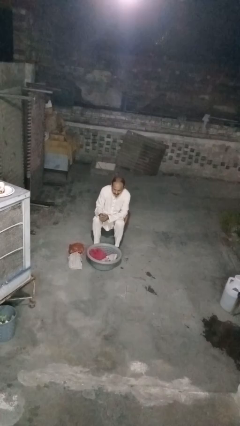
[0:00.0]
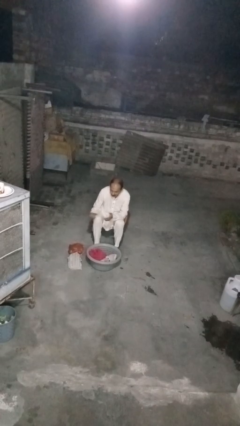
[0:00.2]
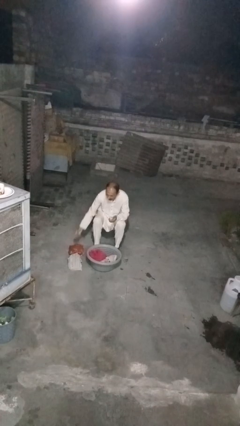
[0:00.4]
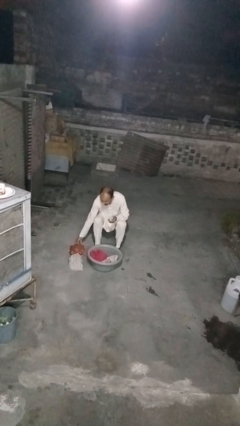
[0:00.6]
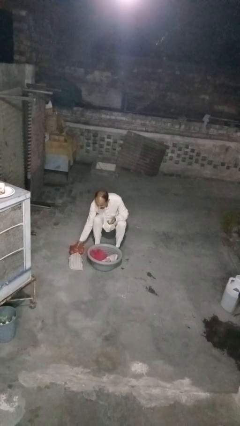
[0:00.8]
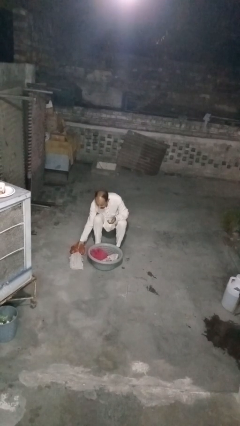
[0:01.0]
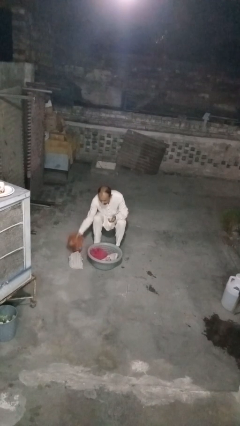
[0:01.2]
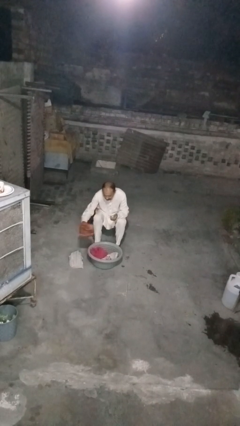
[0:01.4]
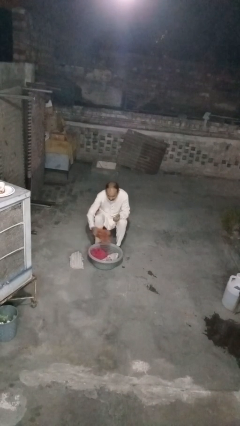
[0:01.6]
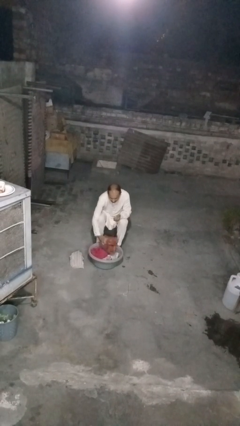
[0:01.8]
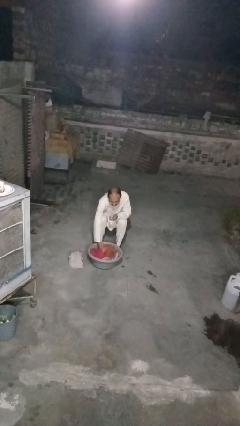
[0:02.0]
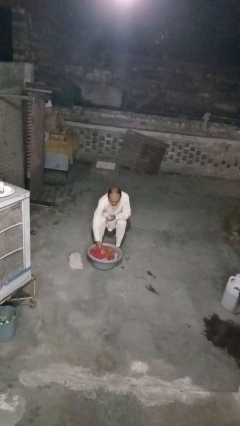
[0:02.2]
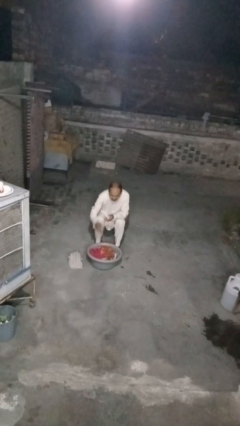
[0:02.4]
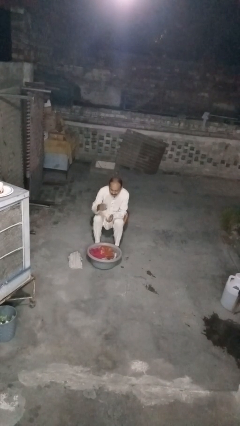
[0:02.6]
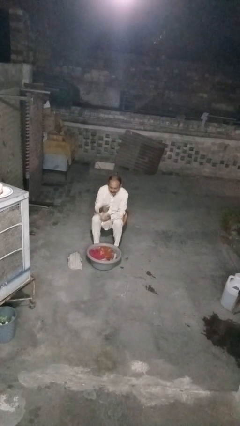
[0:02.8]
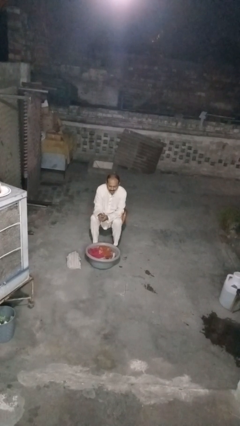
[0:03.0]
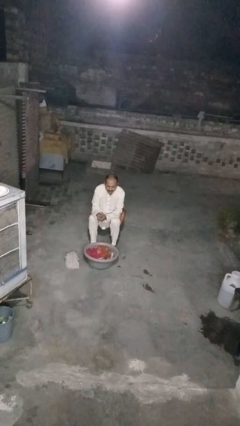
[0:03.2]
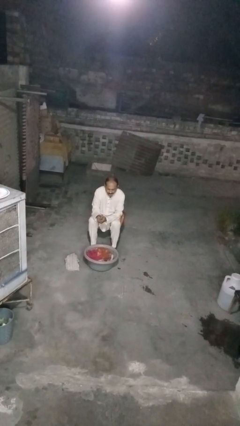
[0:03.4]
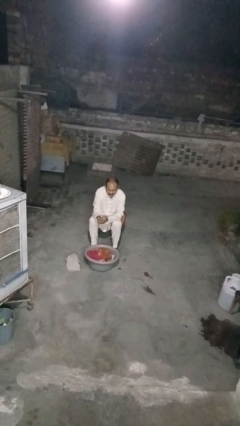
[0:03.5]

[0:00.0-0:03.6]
person puts object into basket

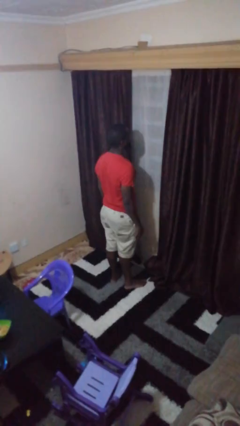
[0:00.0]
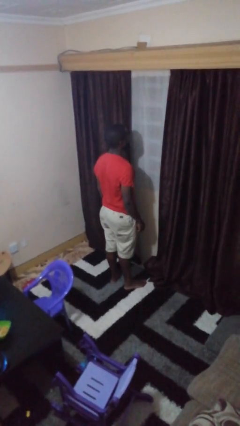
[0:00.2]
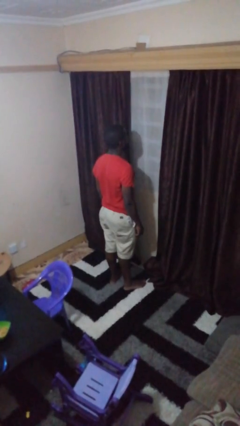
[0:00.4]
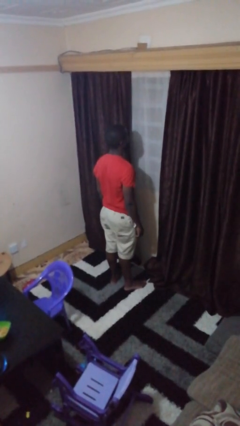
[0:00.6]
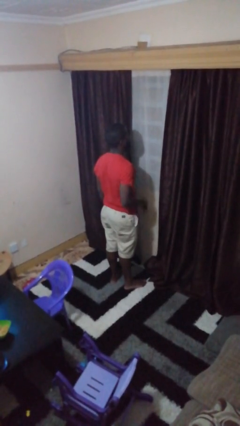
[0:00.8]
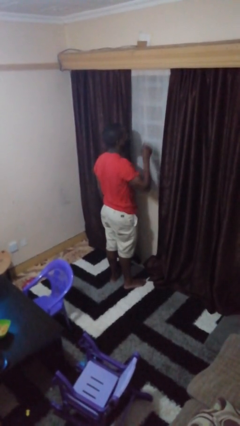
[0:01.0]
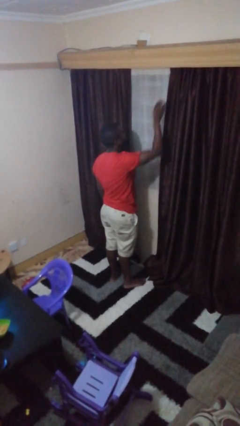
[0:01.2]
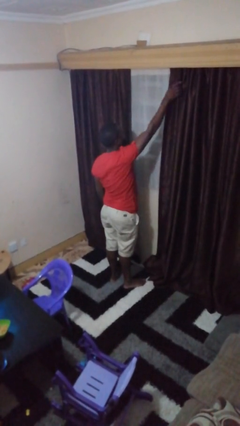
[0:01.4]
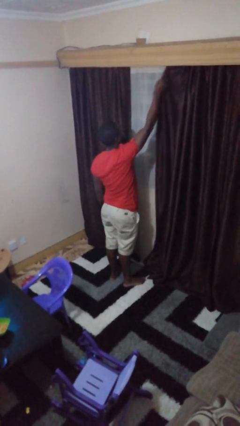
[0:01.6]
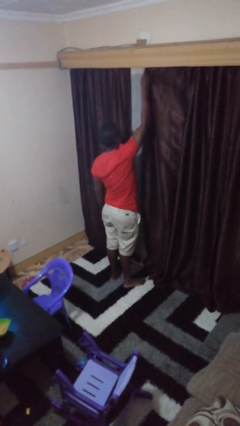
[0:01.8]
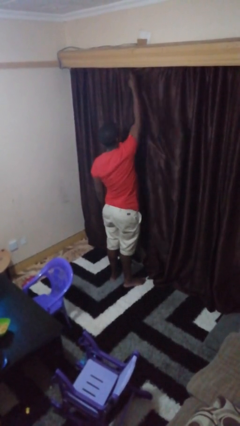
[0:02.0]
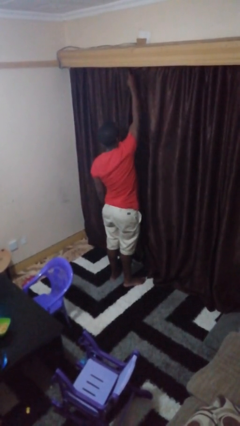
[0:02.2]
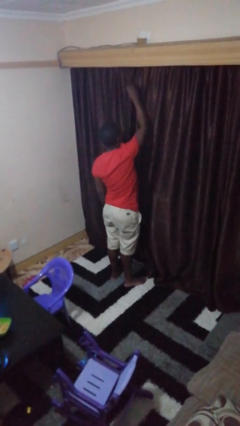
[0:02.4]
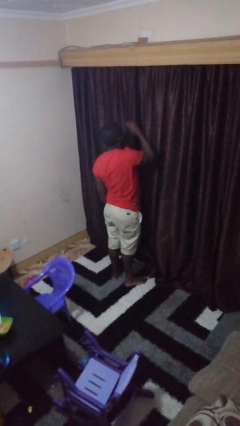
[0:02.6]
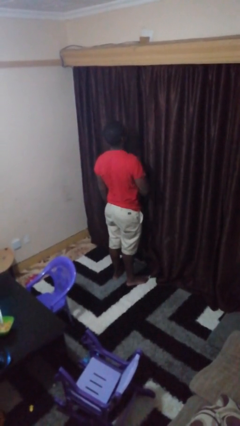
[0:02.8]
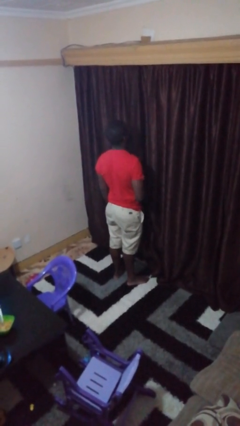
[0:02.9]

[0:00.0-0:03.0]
person closes curtains

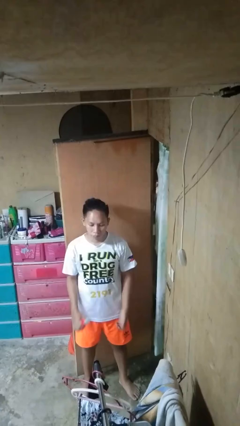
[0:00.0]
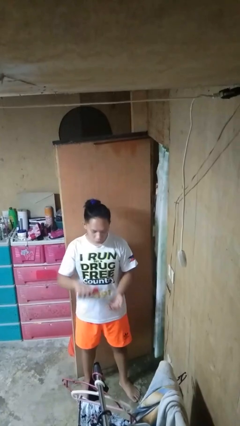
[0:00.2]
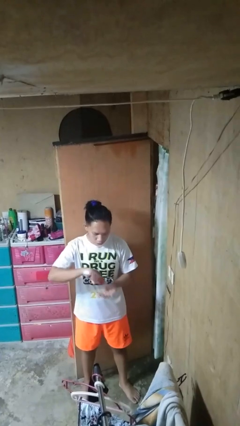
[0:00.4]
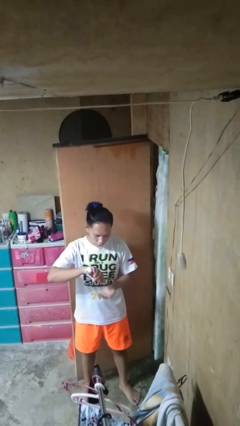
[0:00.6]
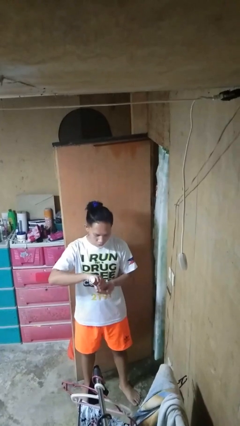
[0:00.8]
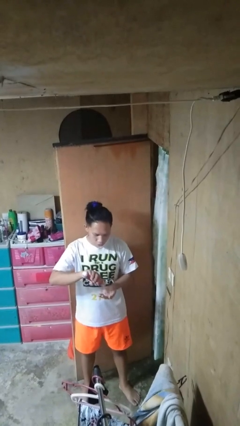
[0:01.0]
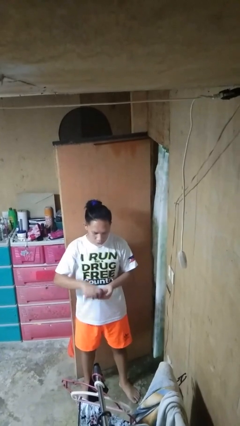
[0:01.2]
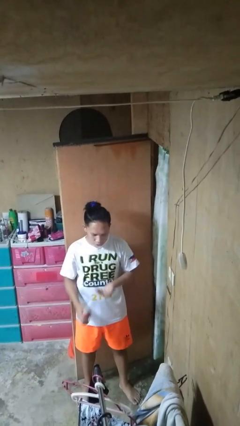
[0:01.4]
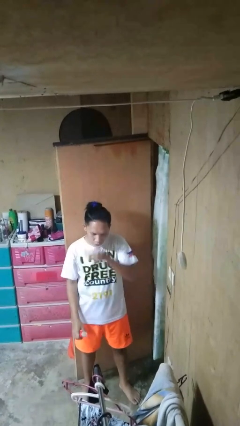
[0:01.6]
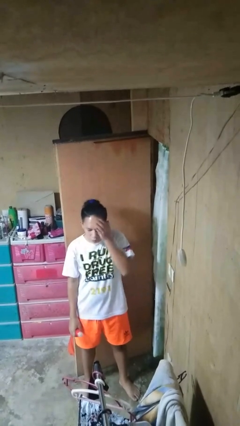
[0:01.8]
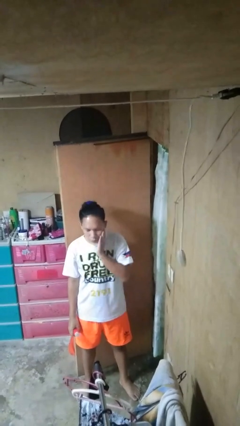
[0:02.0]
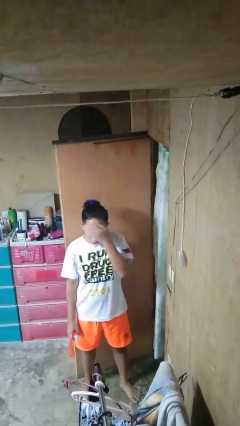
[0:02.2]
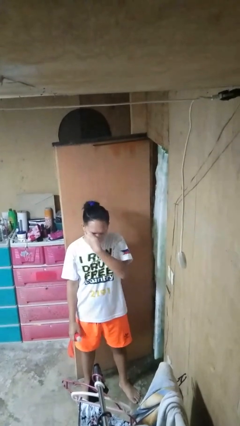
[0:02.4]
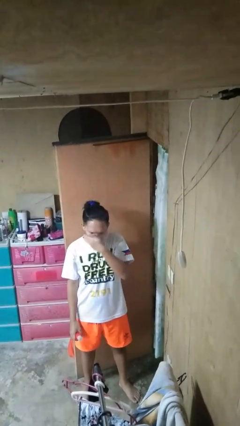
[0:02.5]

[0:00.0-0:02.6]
person applies facial moisturizer

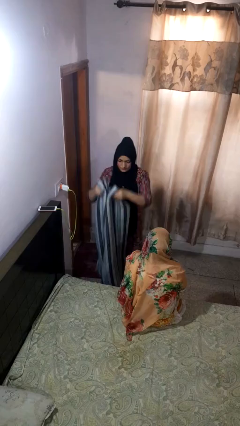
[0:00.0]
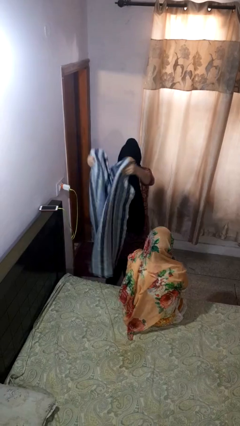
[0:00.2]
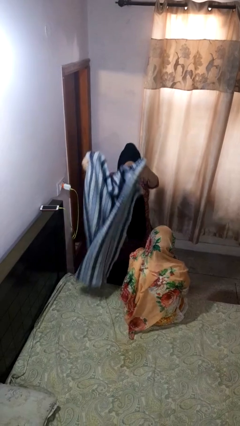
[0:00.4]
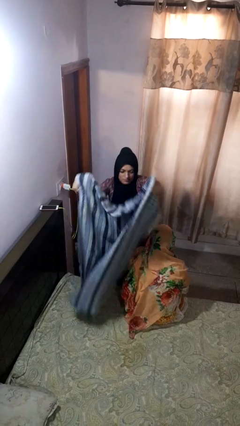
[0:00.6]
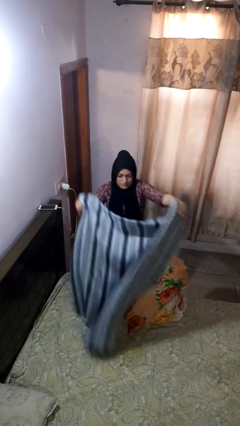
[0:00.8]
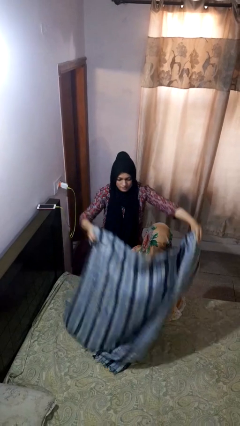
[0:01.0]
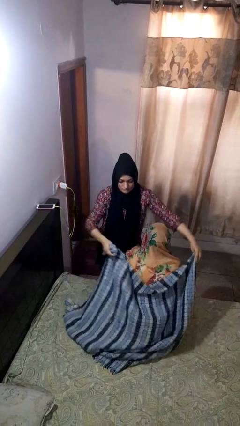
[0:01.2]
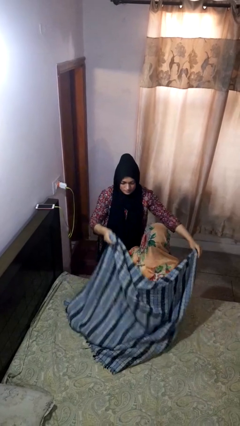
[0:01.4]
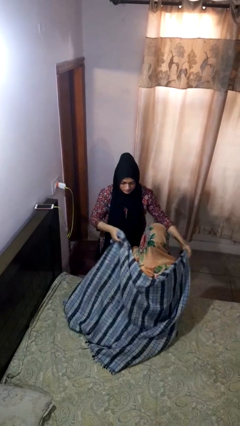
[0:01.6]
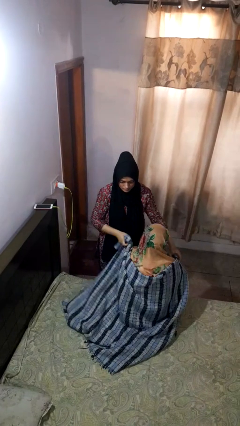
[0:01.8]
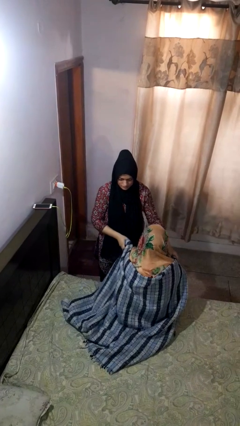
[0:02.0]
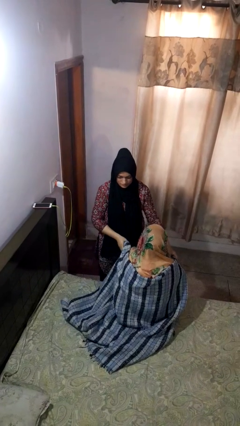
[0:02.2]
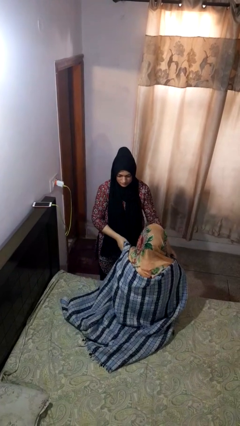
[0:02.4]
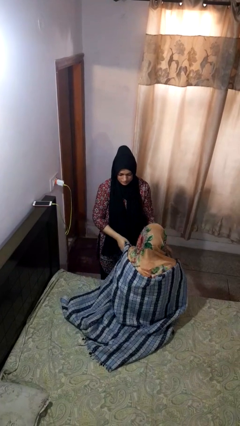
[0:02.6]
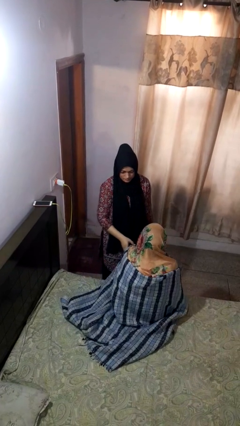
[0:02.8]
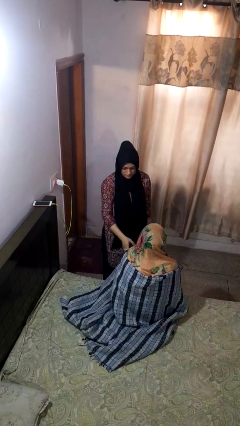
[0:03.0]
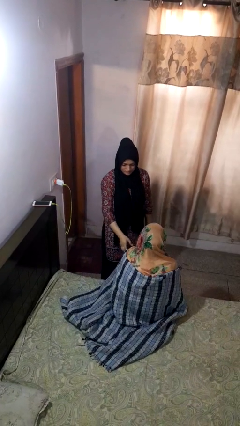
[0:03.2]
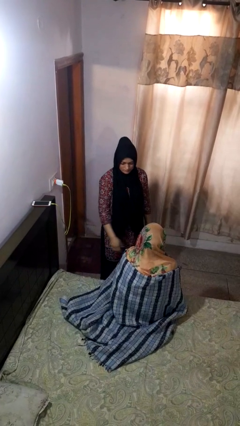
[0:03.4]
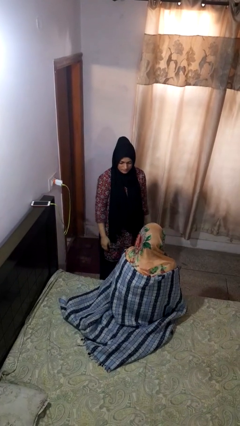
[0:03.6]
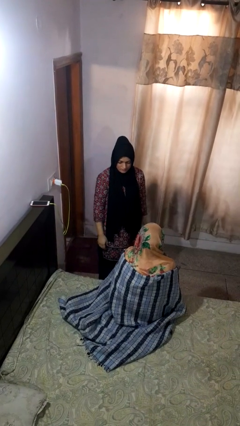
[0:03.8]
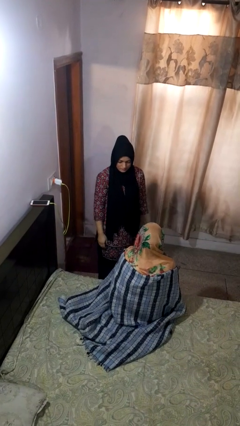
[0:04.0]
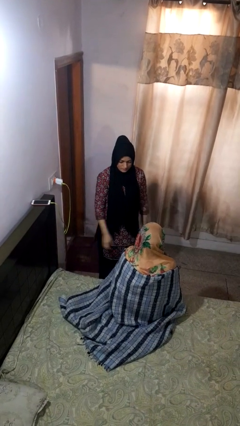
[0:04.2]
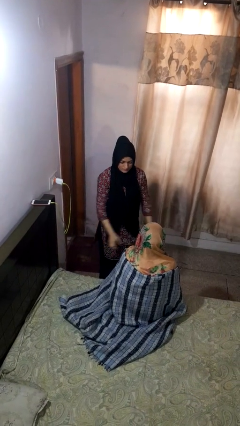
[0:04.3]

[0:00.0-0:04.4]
person covers friend with blanket

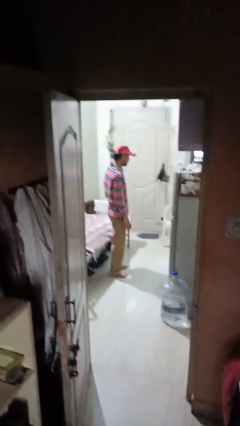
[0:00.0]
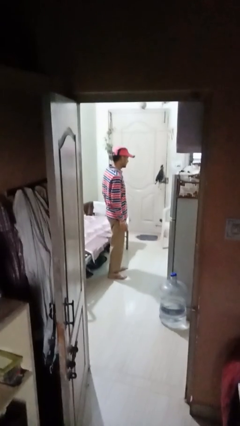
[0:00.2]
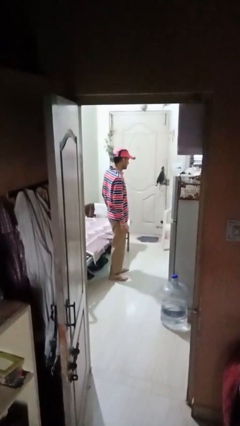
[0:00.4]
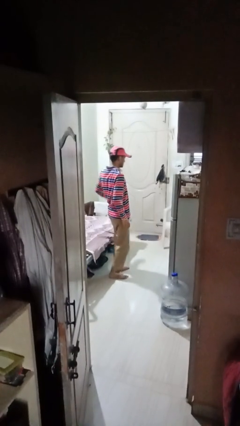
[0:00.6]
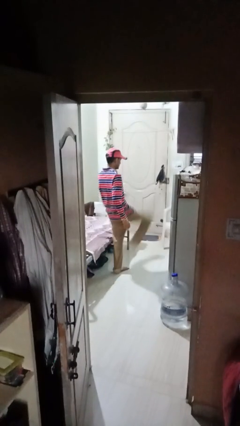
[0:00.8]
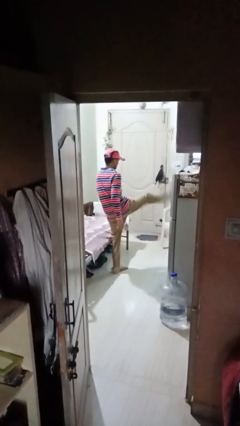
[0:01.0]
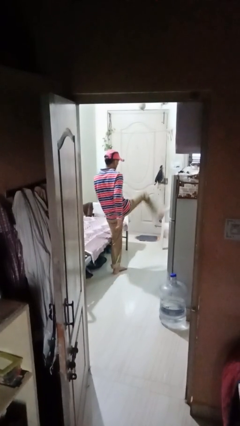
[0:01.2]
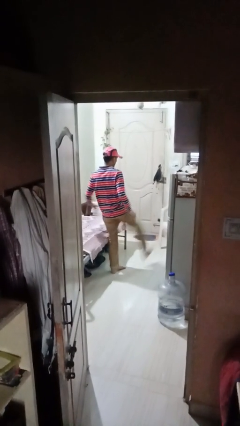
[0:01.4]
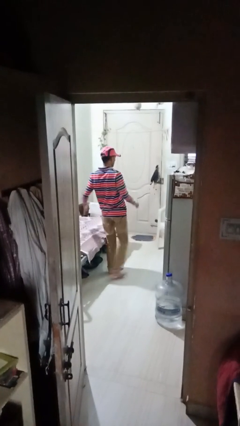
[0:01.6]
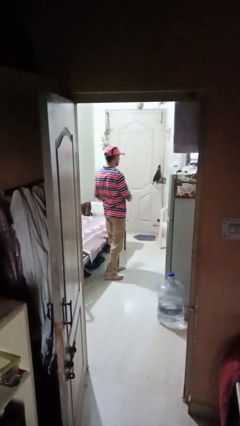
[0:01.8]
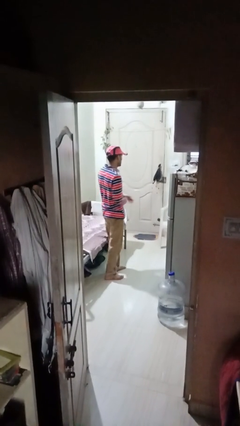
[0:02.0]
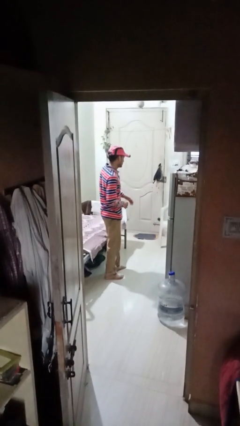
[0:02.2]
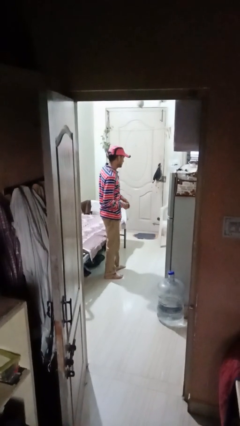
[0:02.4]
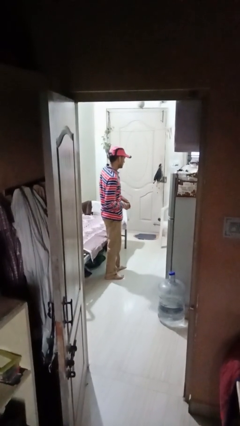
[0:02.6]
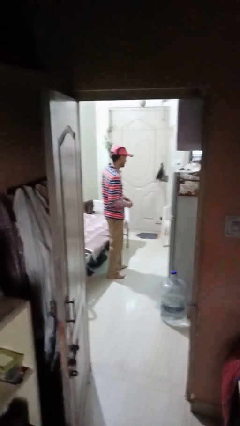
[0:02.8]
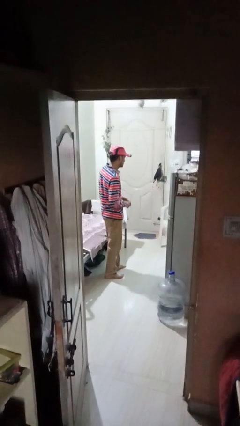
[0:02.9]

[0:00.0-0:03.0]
person karate kicks

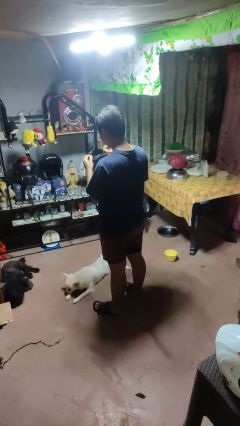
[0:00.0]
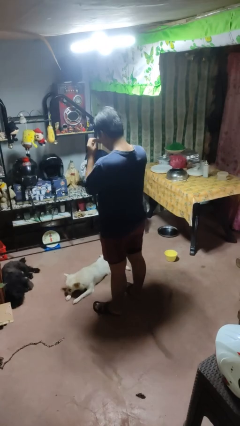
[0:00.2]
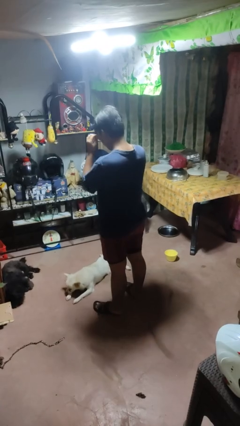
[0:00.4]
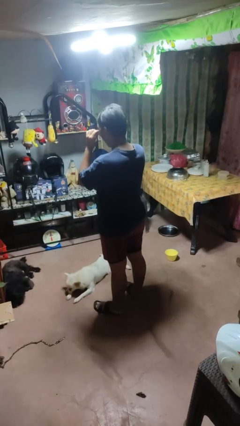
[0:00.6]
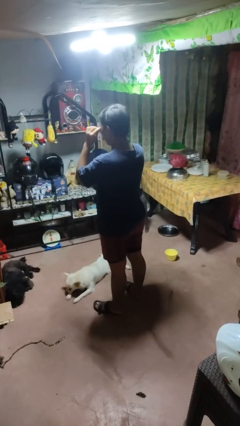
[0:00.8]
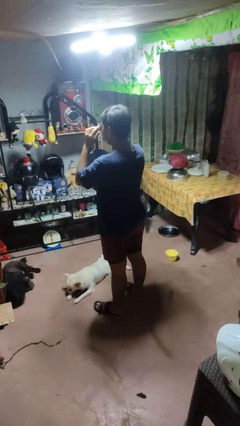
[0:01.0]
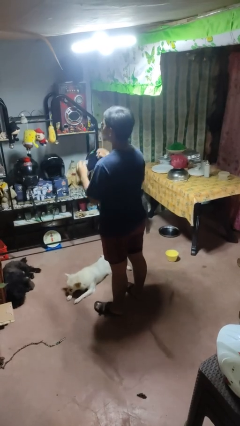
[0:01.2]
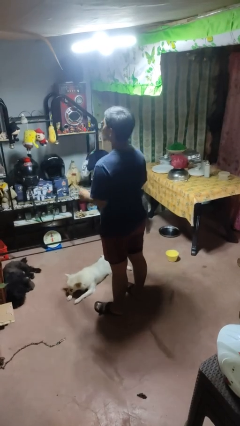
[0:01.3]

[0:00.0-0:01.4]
person puts on sunglasses
